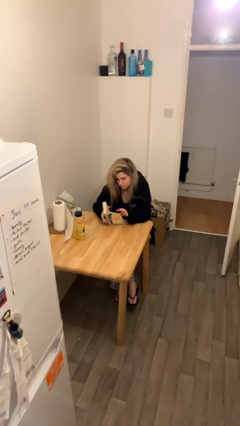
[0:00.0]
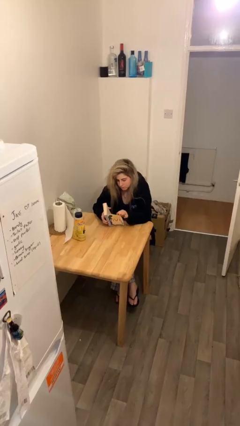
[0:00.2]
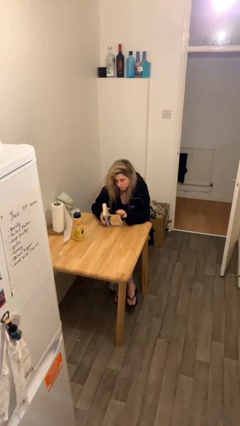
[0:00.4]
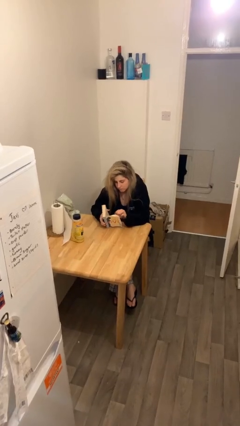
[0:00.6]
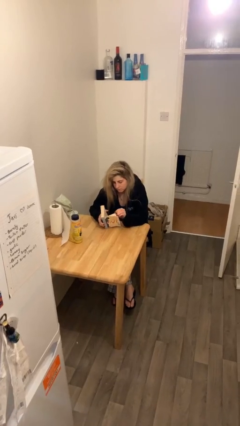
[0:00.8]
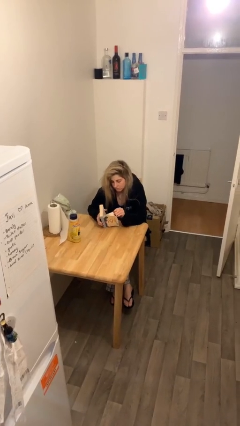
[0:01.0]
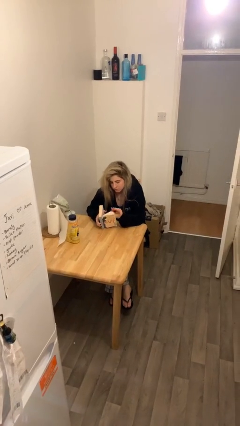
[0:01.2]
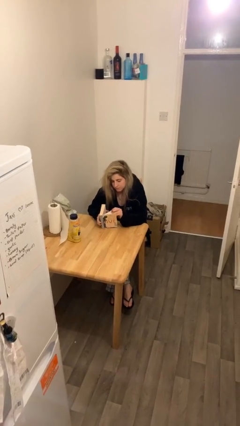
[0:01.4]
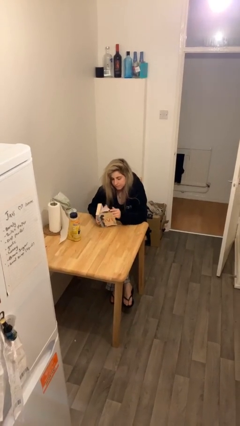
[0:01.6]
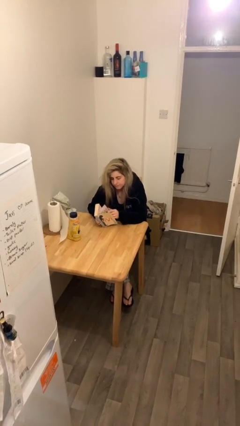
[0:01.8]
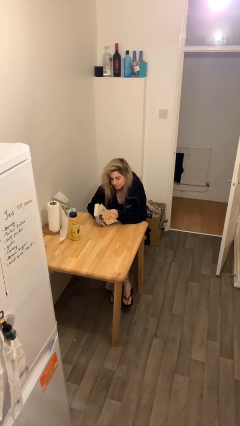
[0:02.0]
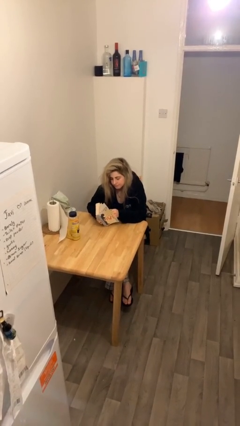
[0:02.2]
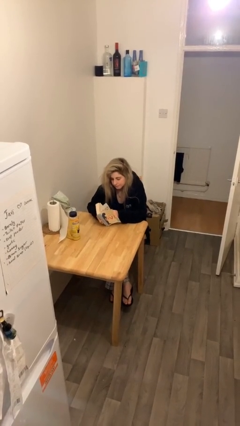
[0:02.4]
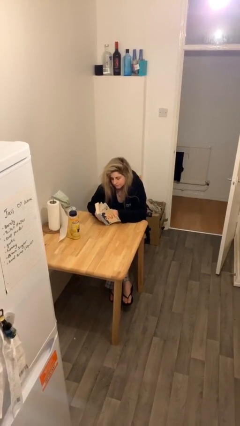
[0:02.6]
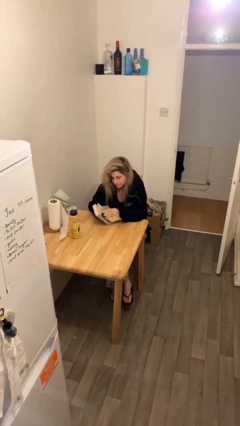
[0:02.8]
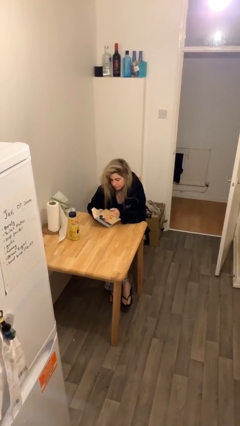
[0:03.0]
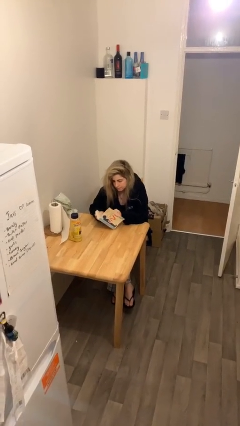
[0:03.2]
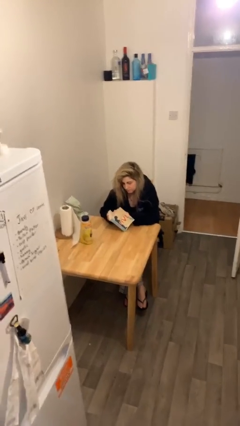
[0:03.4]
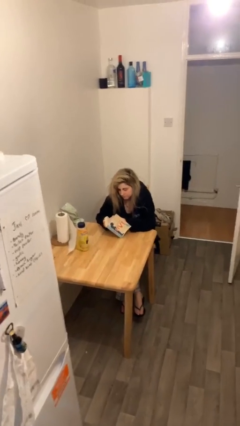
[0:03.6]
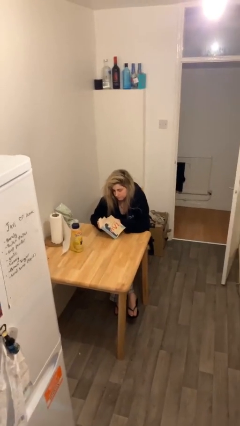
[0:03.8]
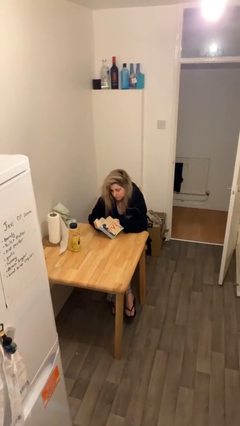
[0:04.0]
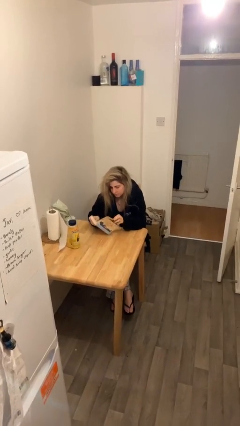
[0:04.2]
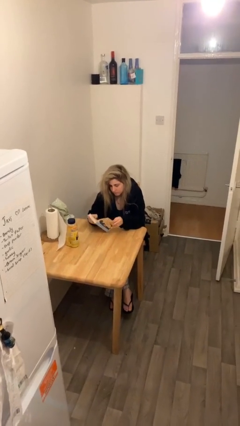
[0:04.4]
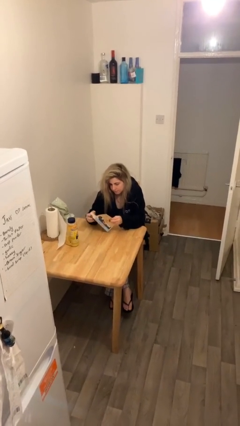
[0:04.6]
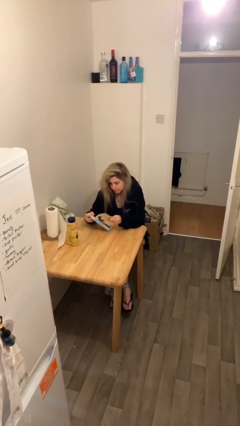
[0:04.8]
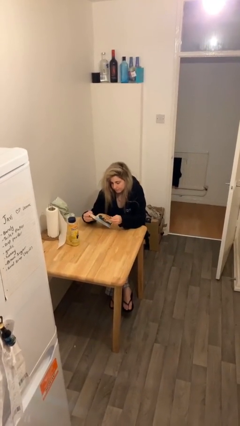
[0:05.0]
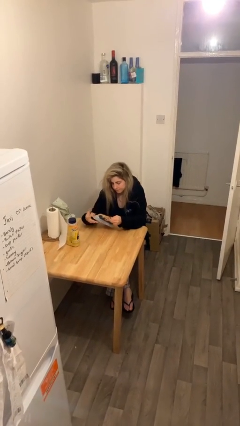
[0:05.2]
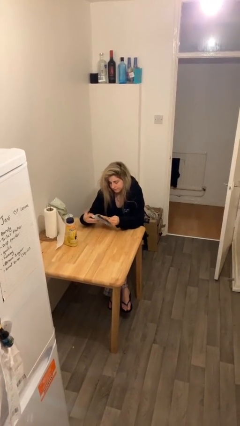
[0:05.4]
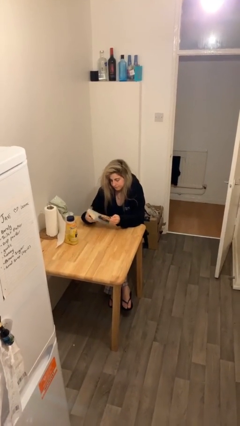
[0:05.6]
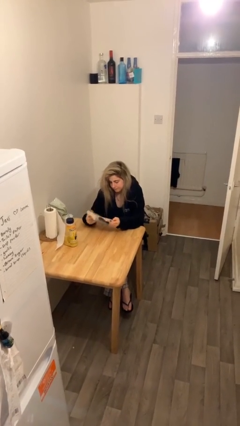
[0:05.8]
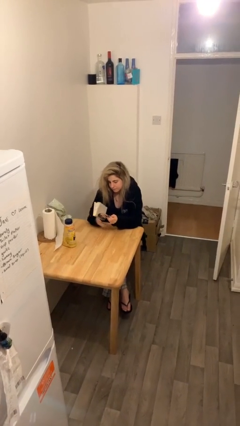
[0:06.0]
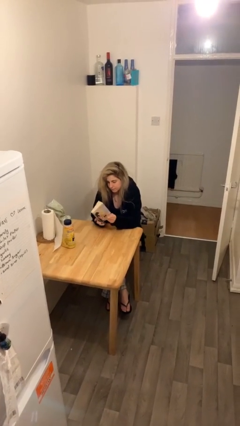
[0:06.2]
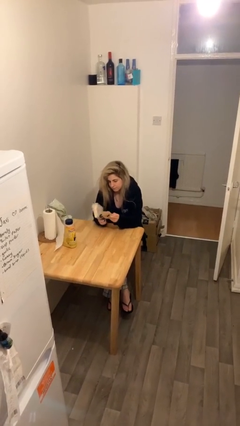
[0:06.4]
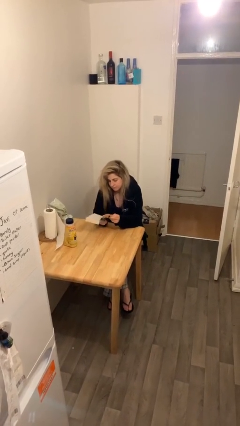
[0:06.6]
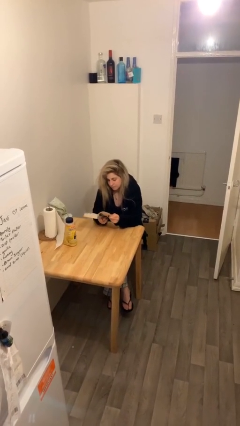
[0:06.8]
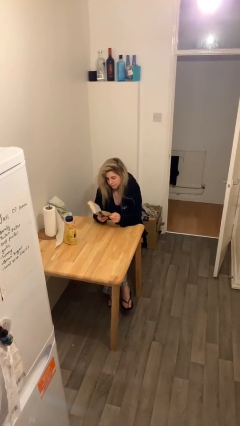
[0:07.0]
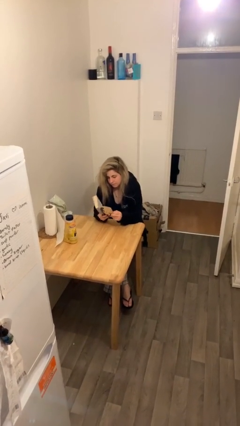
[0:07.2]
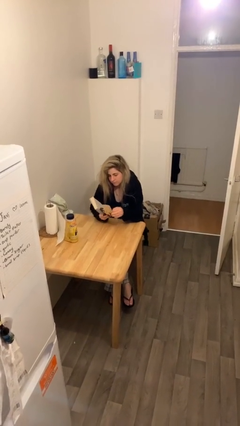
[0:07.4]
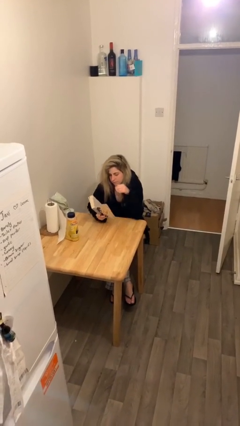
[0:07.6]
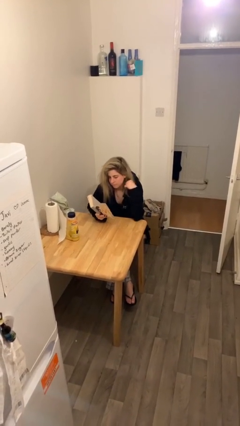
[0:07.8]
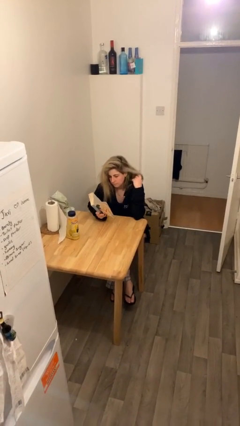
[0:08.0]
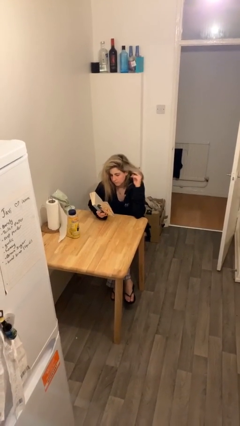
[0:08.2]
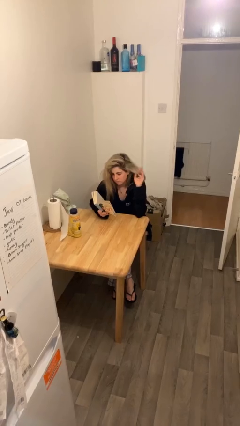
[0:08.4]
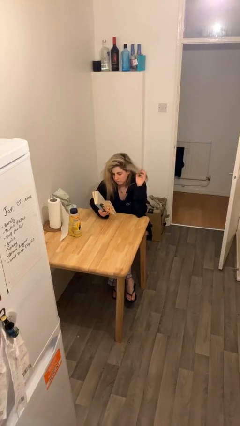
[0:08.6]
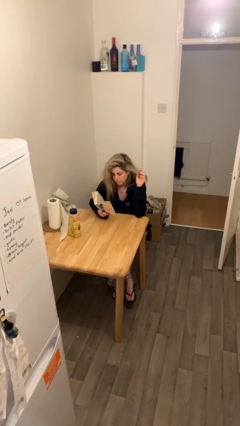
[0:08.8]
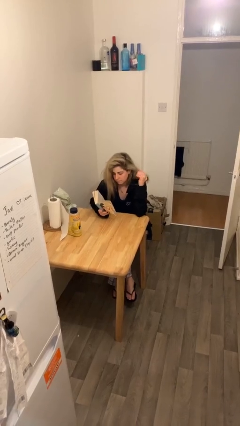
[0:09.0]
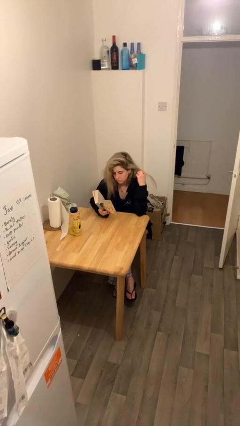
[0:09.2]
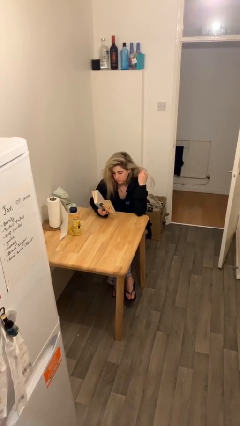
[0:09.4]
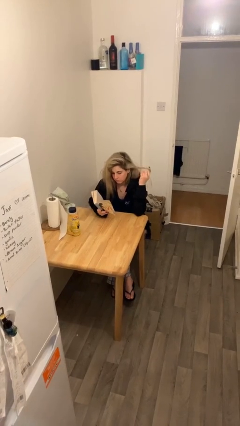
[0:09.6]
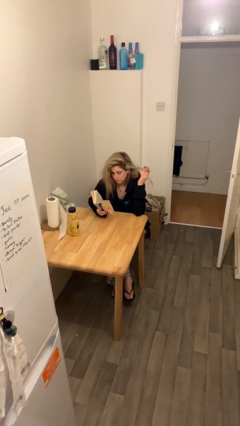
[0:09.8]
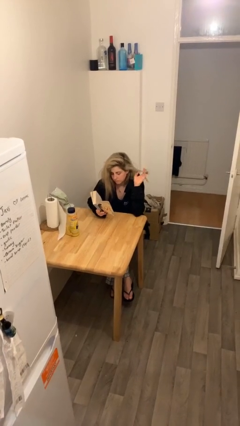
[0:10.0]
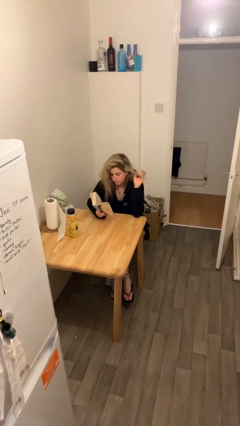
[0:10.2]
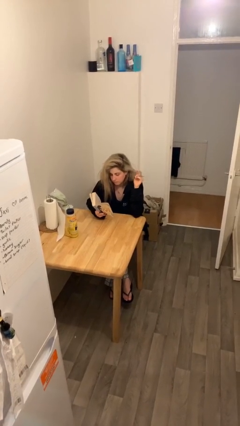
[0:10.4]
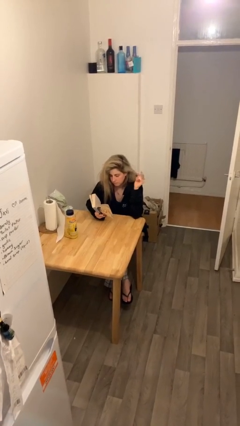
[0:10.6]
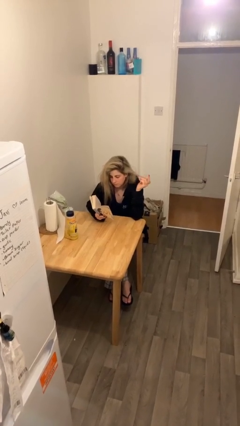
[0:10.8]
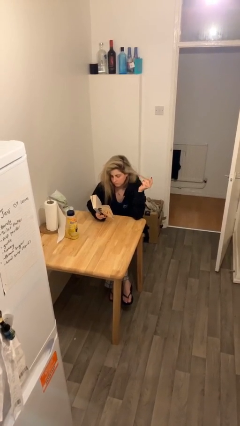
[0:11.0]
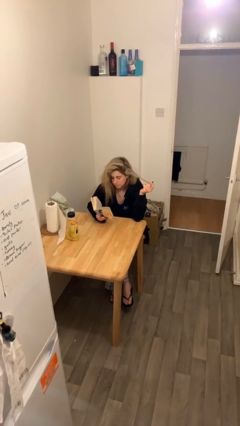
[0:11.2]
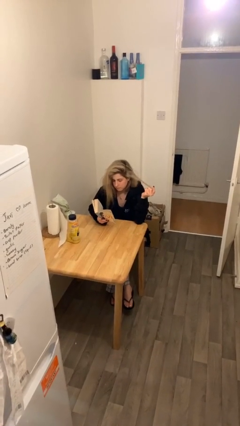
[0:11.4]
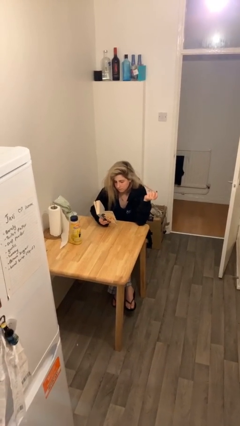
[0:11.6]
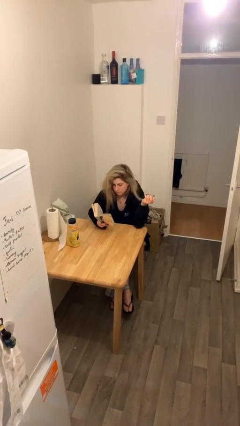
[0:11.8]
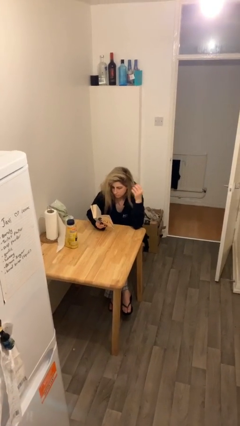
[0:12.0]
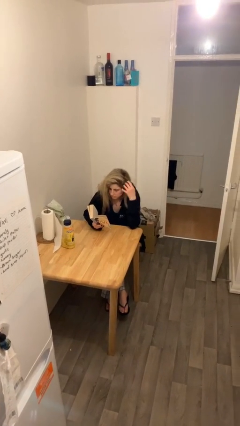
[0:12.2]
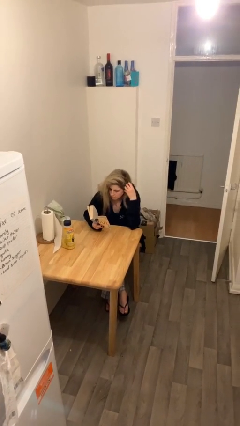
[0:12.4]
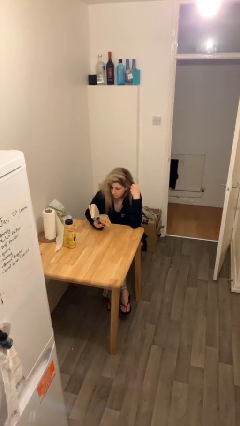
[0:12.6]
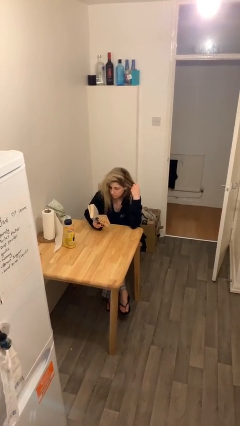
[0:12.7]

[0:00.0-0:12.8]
person reads document

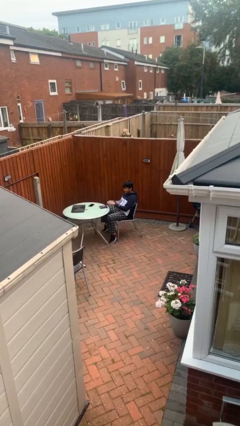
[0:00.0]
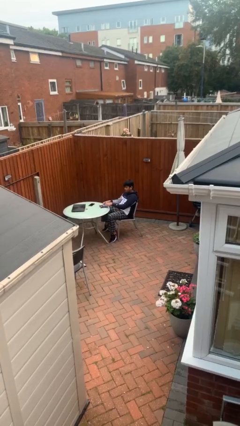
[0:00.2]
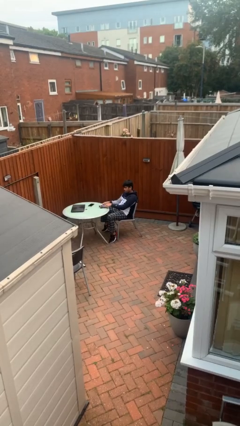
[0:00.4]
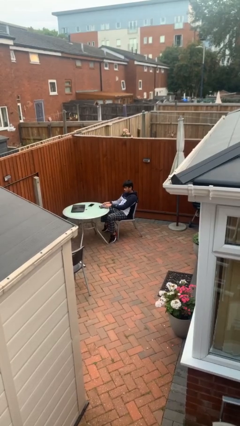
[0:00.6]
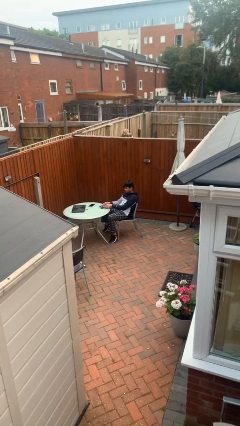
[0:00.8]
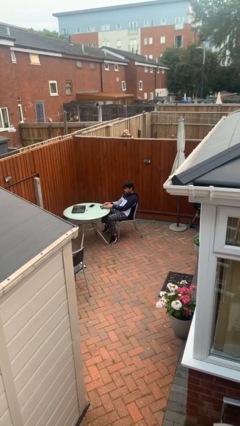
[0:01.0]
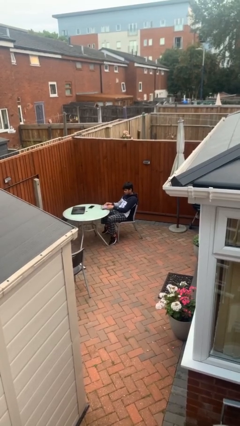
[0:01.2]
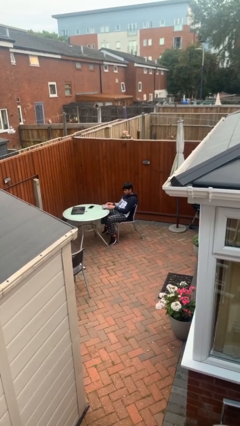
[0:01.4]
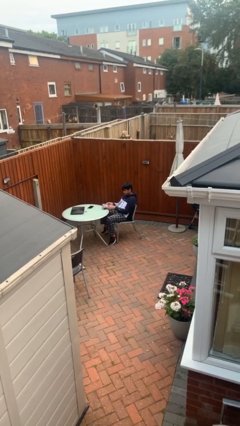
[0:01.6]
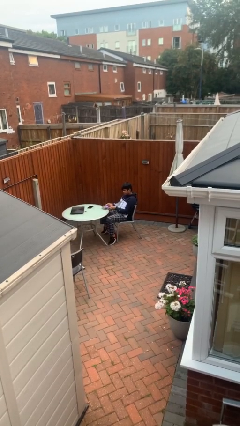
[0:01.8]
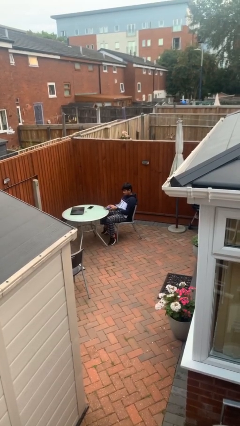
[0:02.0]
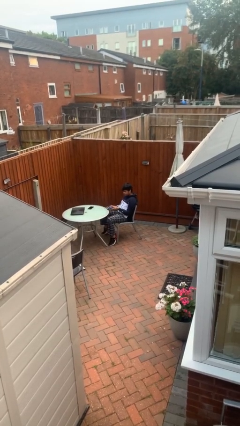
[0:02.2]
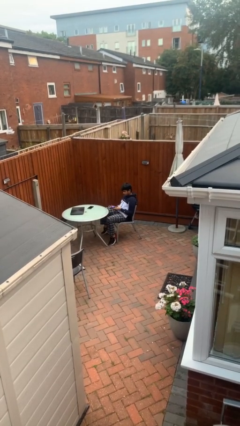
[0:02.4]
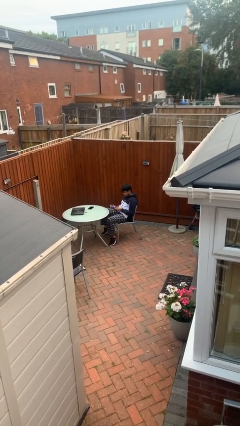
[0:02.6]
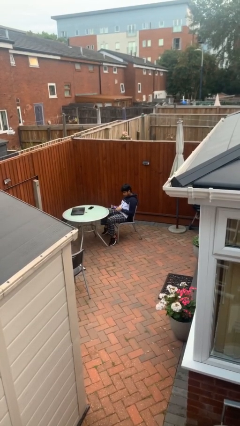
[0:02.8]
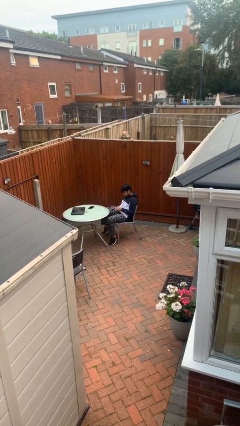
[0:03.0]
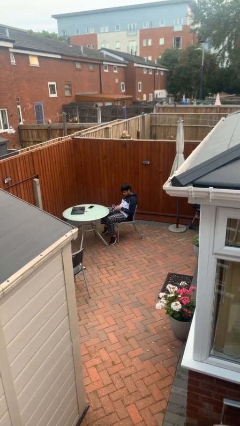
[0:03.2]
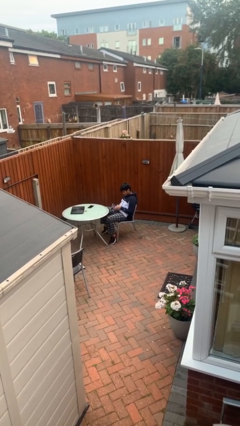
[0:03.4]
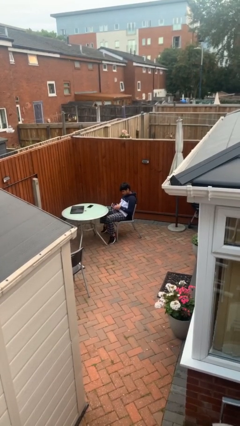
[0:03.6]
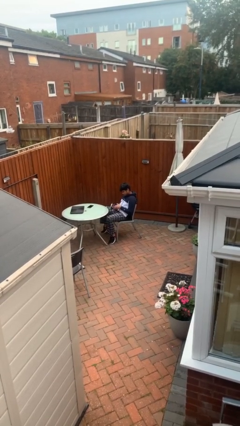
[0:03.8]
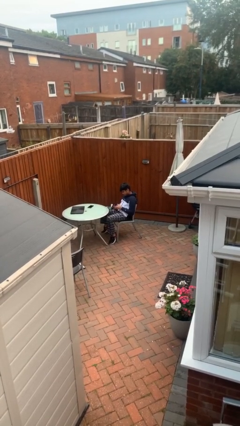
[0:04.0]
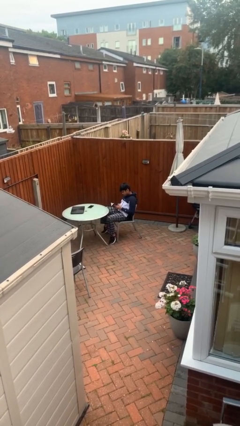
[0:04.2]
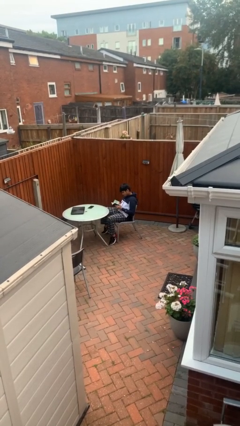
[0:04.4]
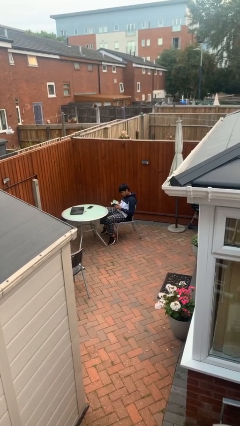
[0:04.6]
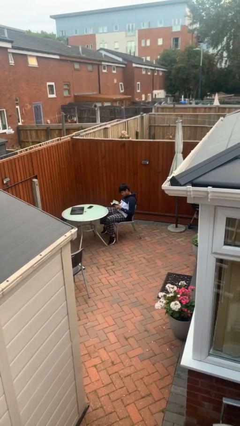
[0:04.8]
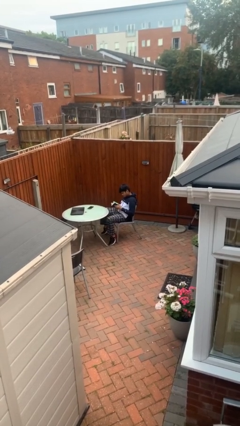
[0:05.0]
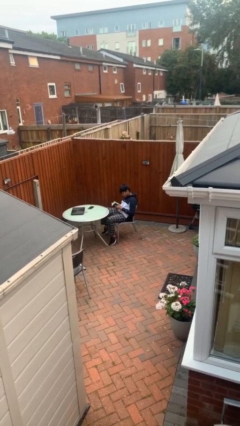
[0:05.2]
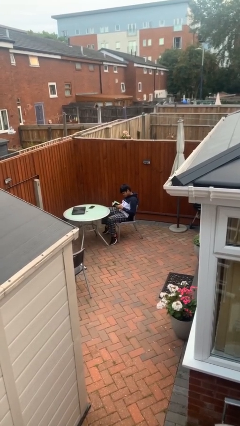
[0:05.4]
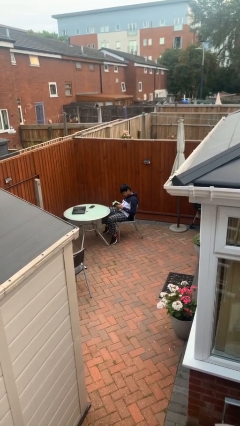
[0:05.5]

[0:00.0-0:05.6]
person picks up object from table
